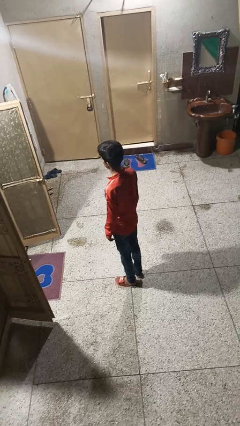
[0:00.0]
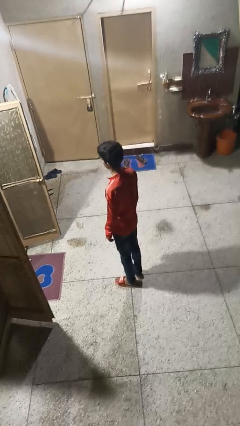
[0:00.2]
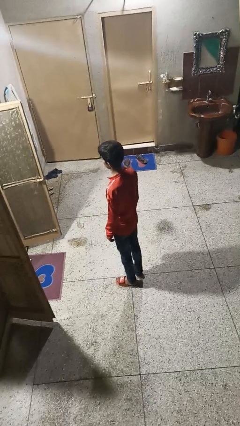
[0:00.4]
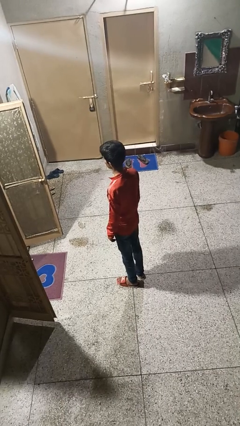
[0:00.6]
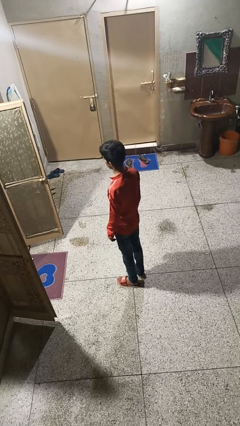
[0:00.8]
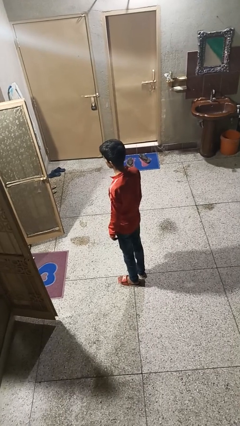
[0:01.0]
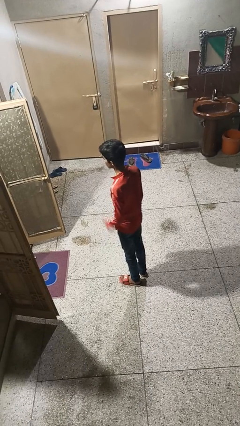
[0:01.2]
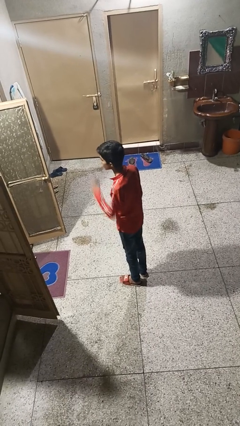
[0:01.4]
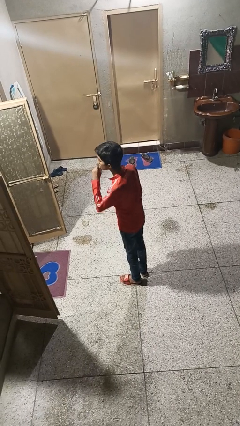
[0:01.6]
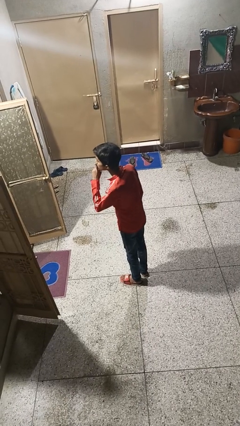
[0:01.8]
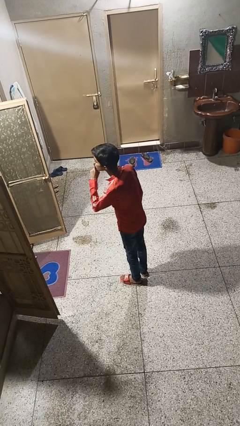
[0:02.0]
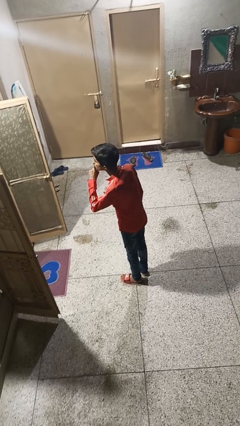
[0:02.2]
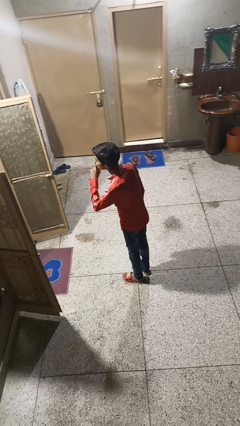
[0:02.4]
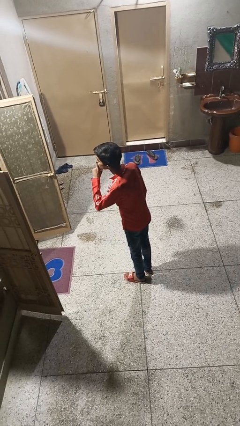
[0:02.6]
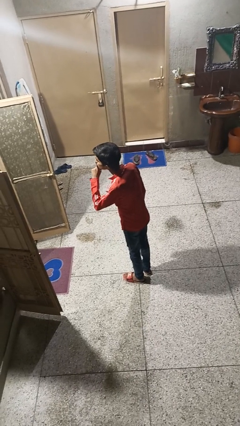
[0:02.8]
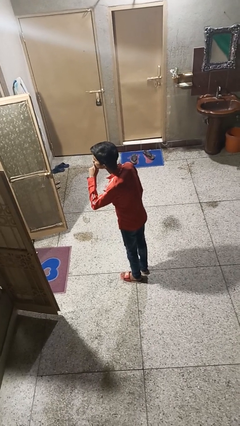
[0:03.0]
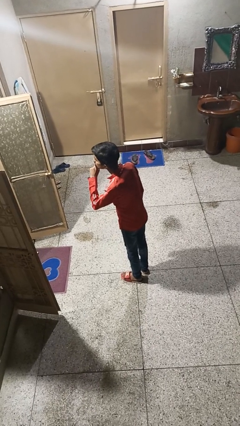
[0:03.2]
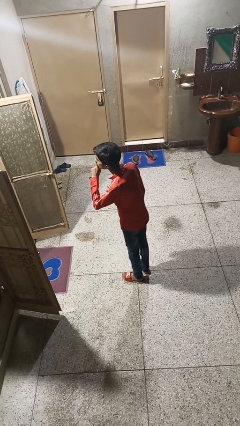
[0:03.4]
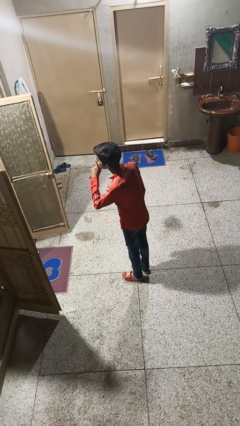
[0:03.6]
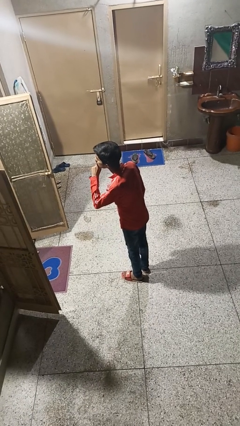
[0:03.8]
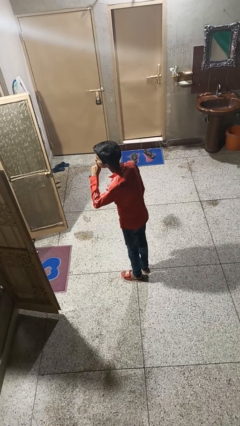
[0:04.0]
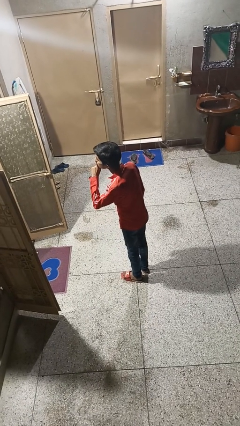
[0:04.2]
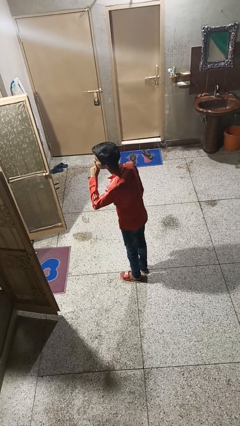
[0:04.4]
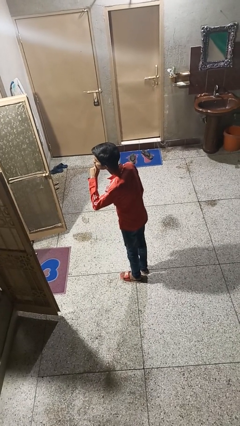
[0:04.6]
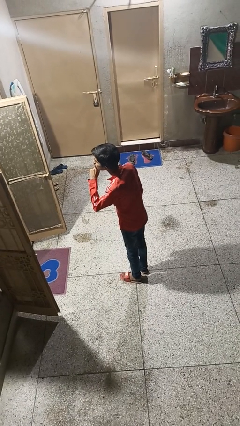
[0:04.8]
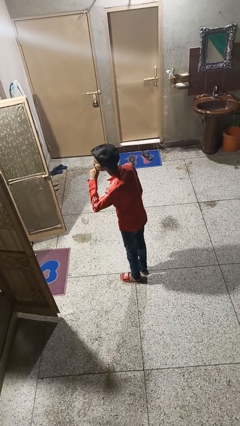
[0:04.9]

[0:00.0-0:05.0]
person gestures be quiet

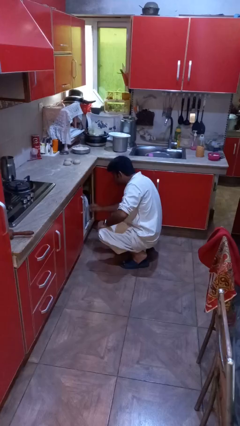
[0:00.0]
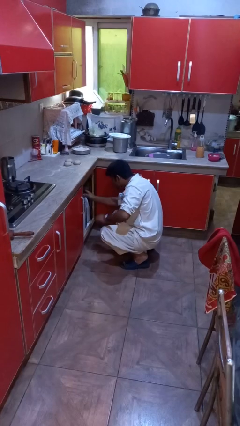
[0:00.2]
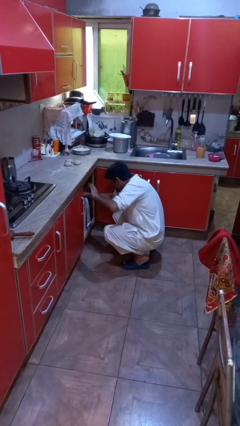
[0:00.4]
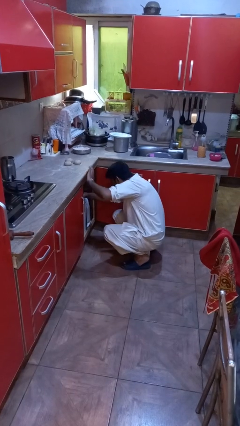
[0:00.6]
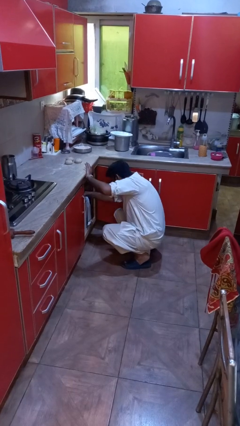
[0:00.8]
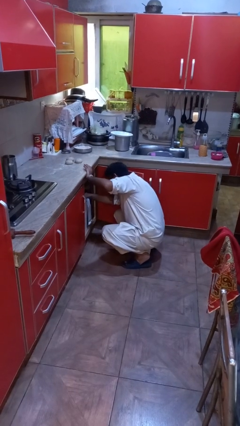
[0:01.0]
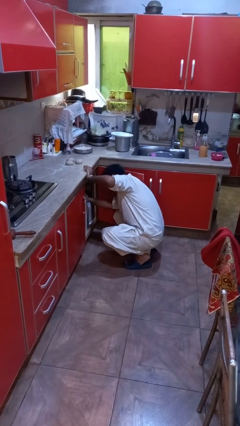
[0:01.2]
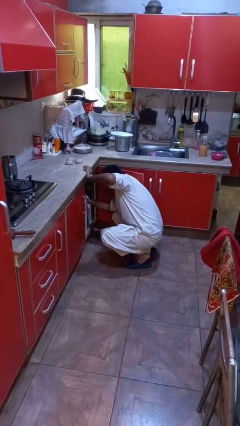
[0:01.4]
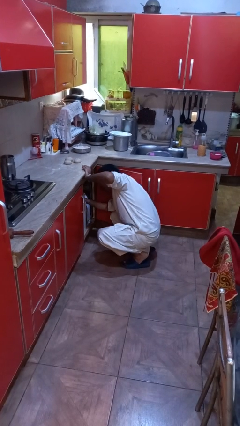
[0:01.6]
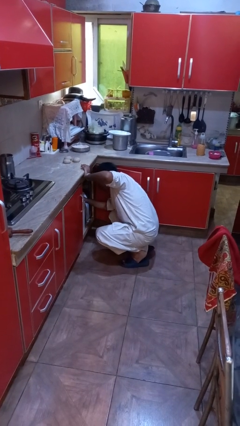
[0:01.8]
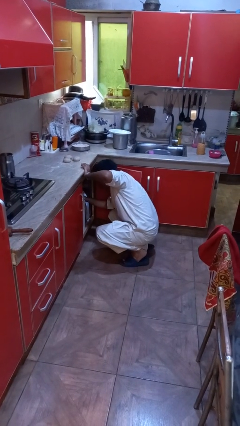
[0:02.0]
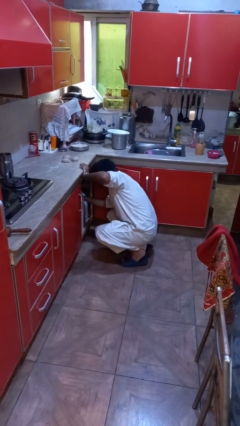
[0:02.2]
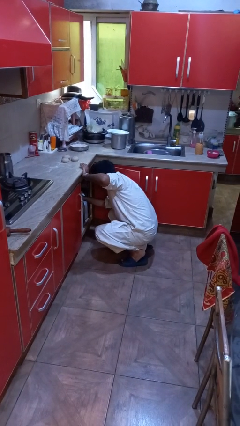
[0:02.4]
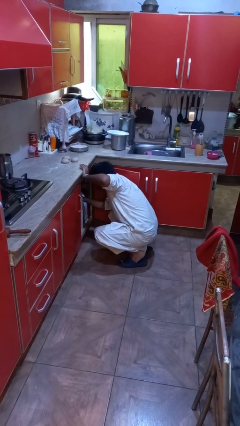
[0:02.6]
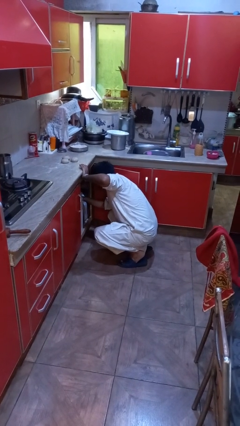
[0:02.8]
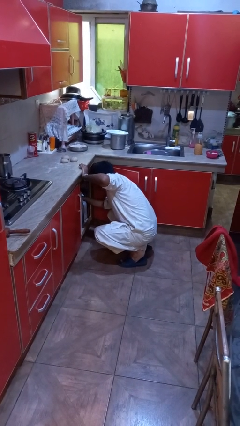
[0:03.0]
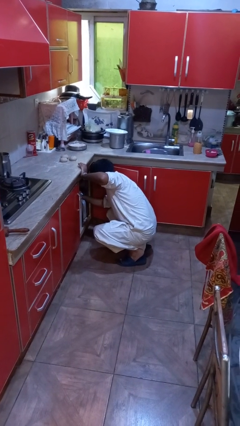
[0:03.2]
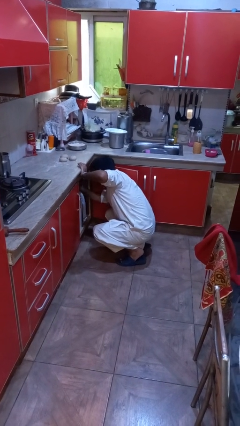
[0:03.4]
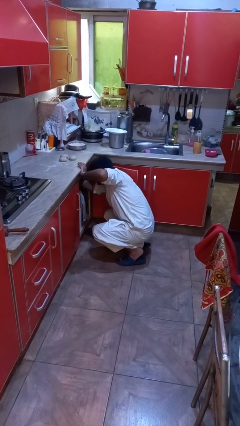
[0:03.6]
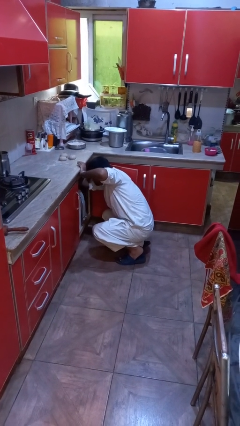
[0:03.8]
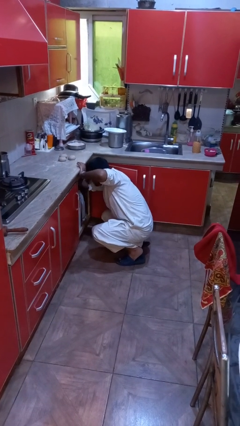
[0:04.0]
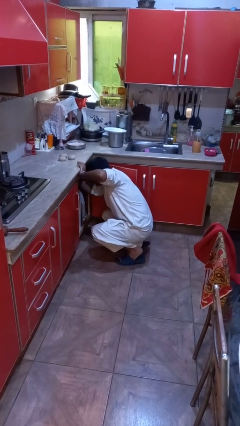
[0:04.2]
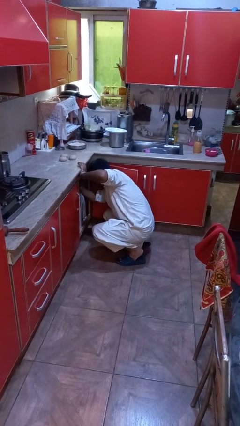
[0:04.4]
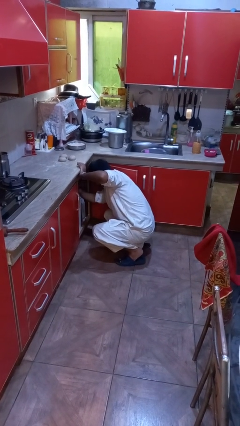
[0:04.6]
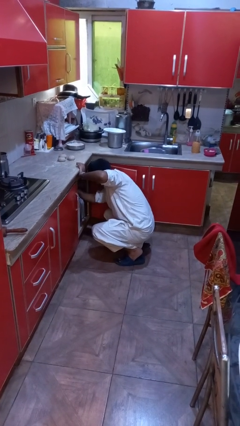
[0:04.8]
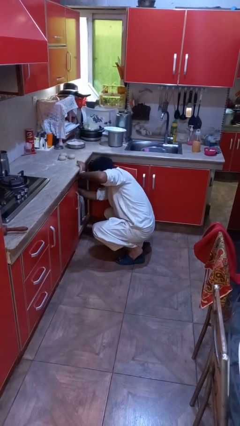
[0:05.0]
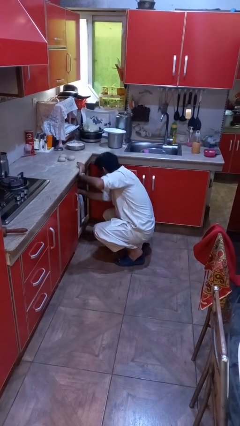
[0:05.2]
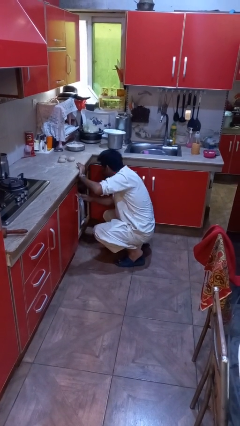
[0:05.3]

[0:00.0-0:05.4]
person searches in cabinet

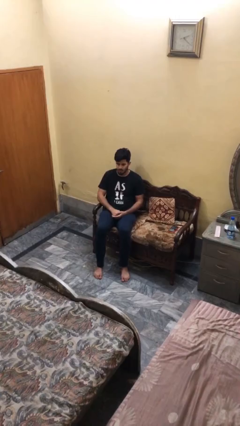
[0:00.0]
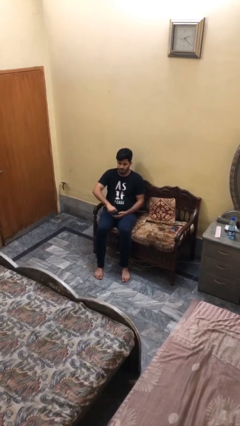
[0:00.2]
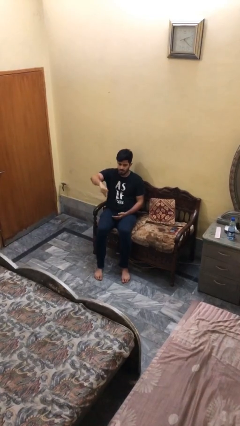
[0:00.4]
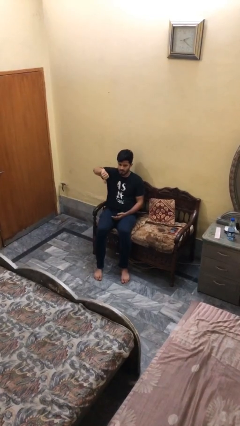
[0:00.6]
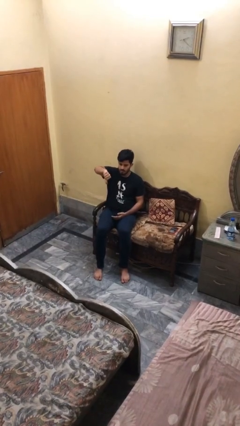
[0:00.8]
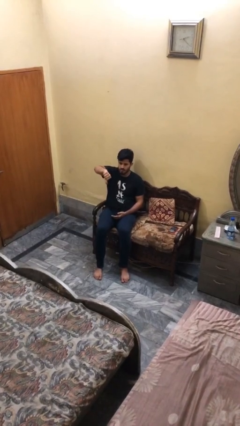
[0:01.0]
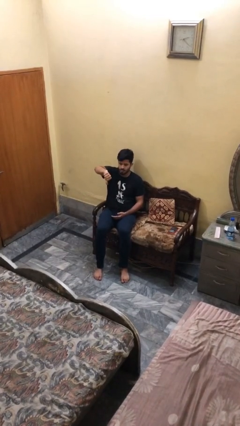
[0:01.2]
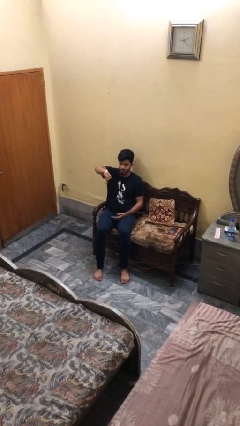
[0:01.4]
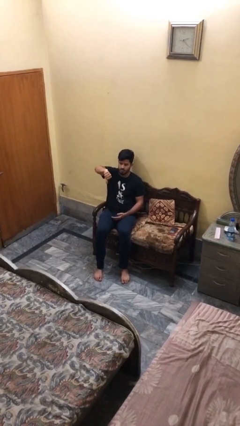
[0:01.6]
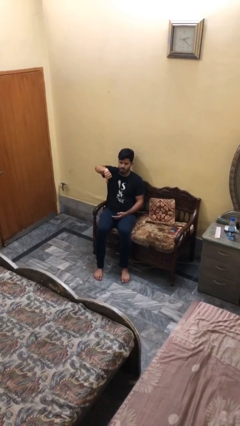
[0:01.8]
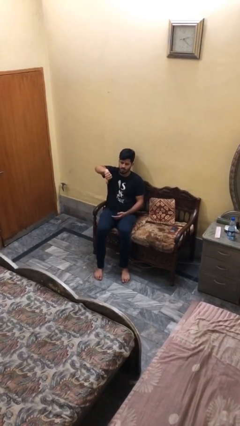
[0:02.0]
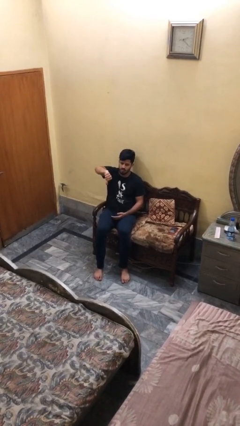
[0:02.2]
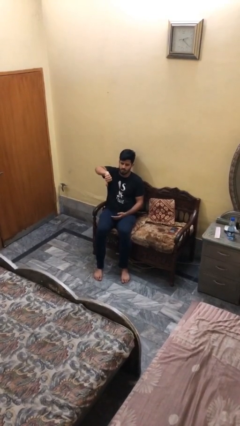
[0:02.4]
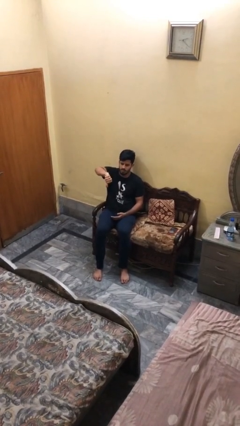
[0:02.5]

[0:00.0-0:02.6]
person gestures thumbs down

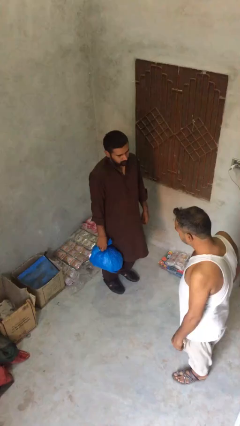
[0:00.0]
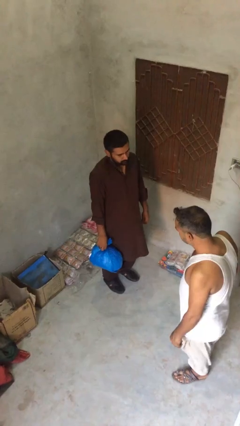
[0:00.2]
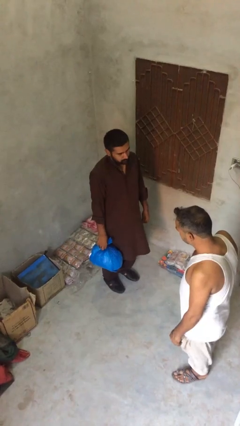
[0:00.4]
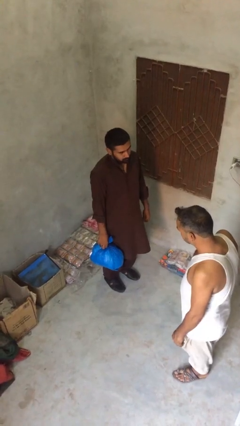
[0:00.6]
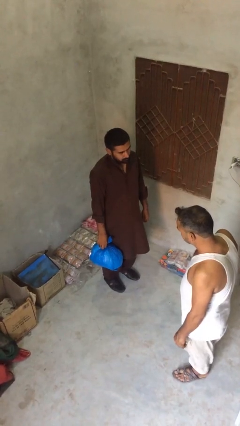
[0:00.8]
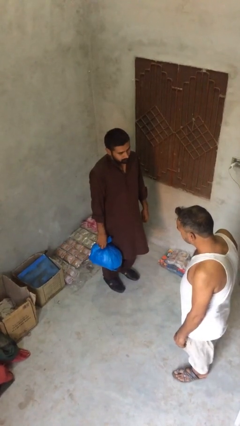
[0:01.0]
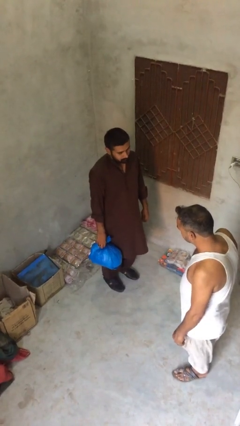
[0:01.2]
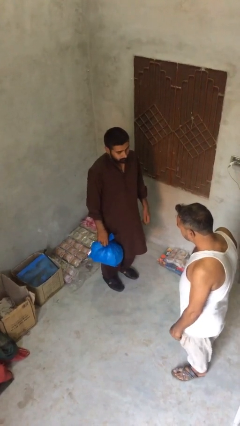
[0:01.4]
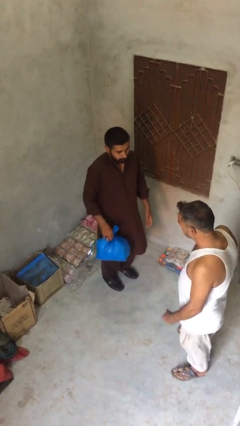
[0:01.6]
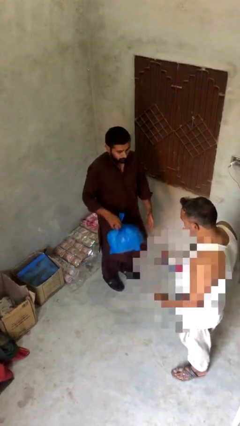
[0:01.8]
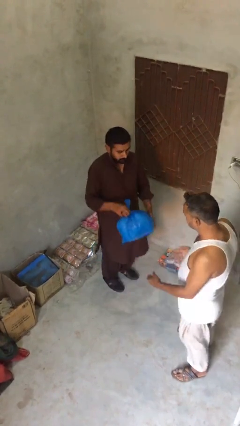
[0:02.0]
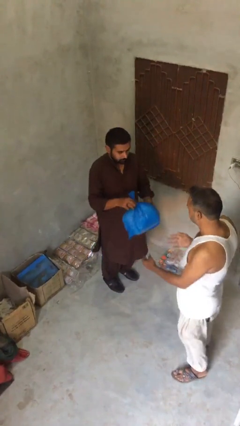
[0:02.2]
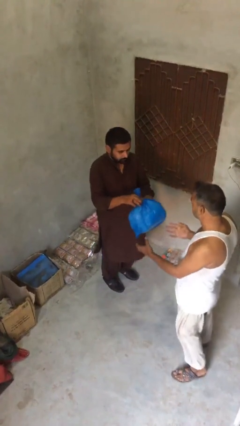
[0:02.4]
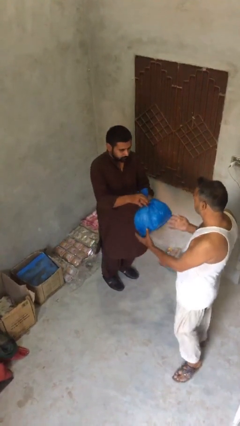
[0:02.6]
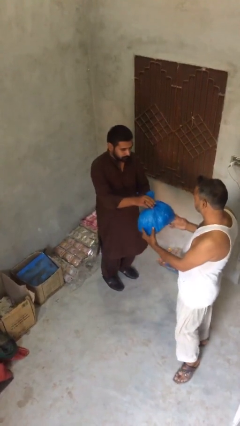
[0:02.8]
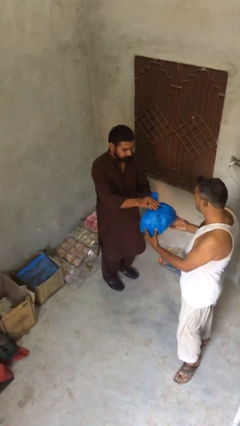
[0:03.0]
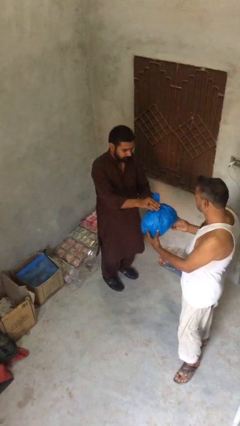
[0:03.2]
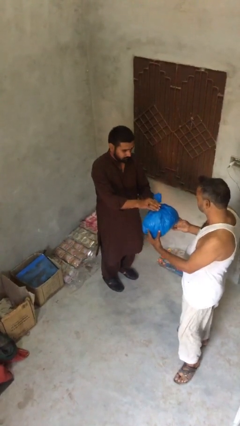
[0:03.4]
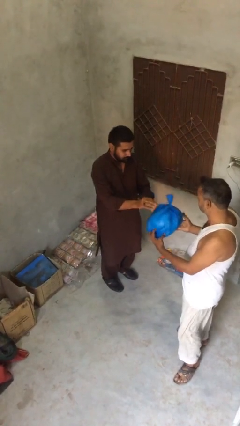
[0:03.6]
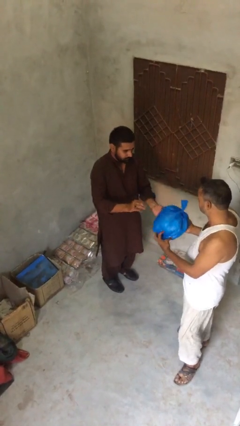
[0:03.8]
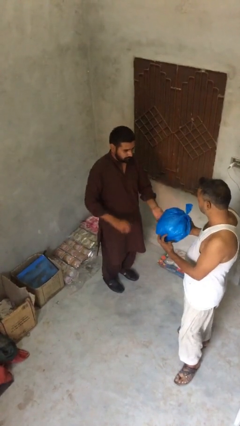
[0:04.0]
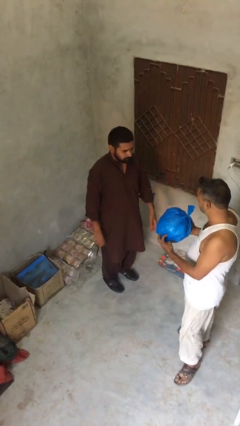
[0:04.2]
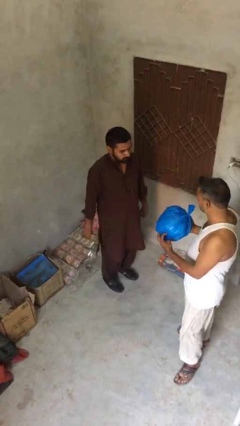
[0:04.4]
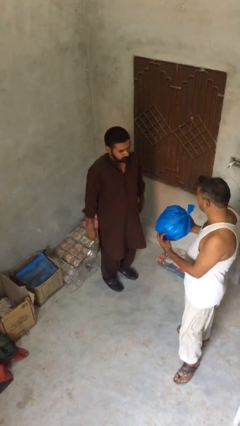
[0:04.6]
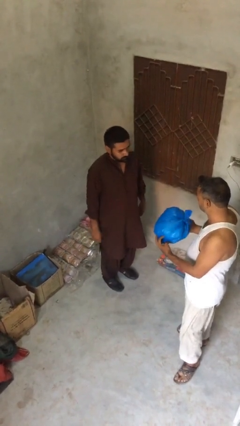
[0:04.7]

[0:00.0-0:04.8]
person transfers object to person
